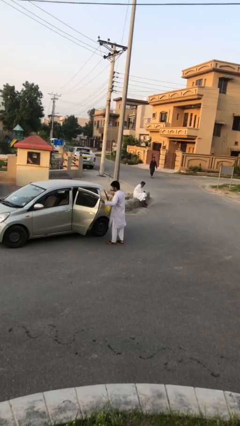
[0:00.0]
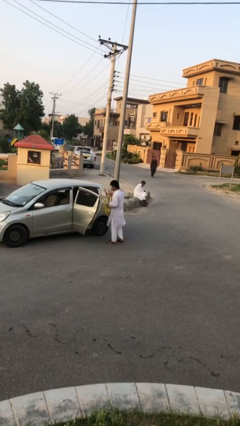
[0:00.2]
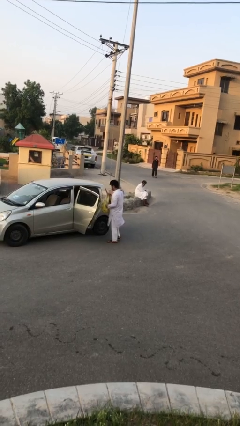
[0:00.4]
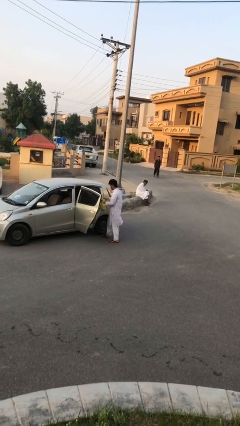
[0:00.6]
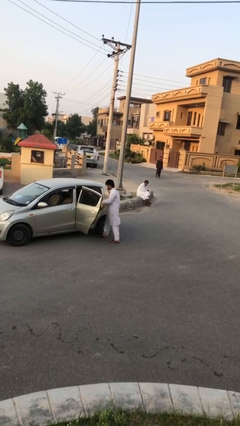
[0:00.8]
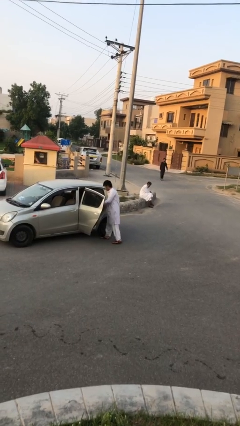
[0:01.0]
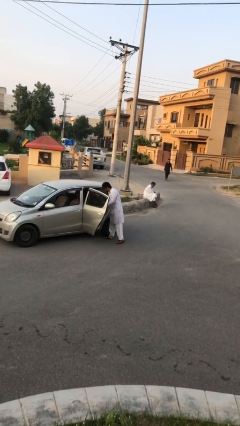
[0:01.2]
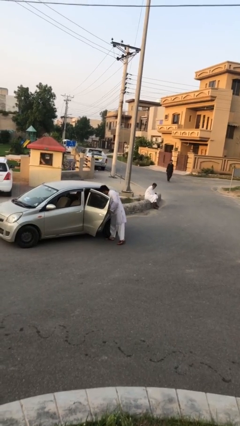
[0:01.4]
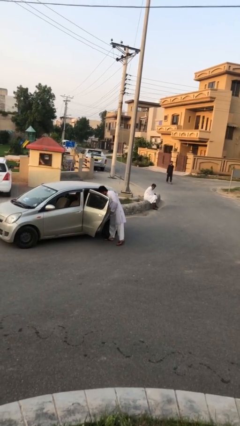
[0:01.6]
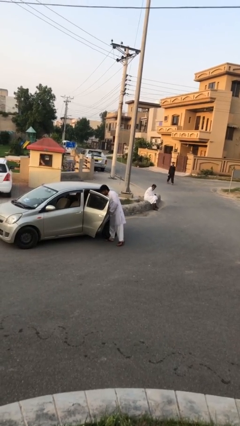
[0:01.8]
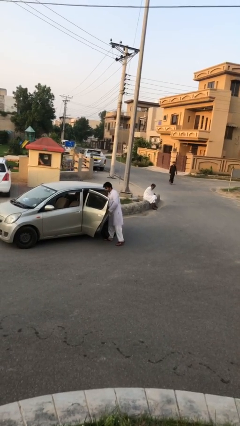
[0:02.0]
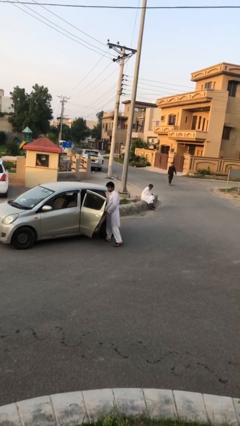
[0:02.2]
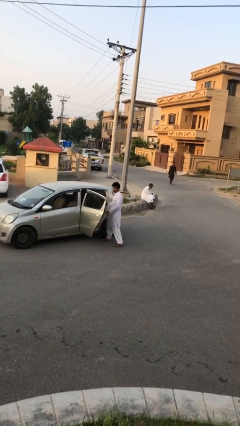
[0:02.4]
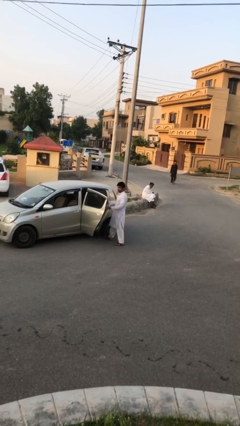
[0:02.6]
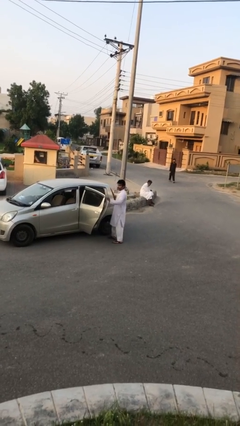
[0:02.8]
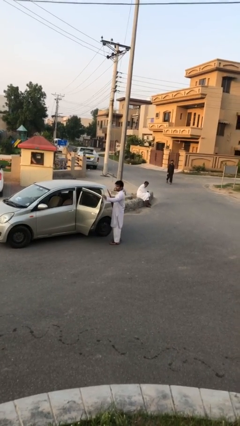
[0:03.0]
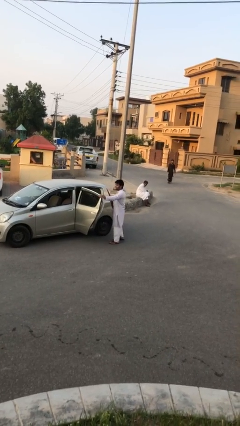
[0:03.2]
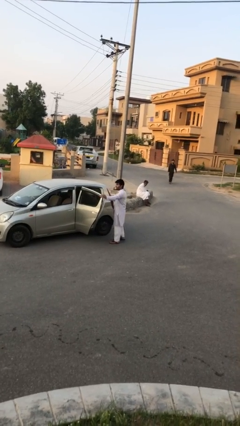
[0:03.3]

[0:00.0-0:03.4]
person loads car

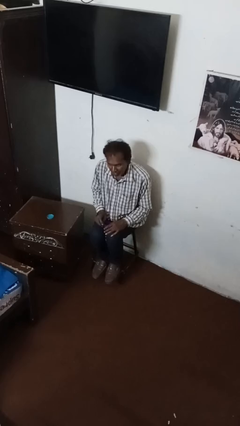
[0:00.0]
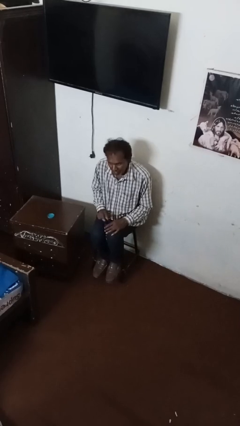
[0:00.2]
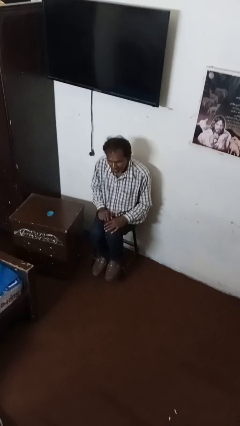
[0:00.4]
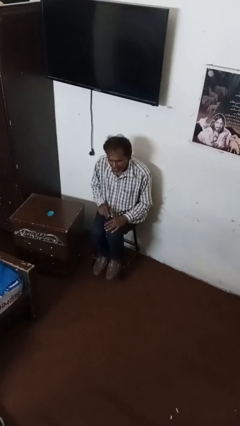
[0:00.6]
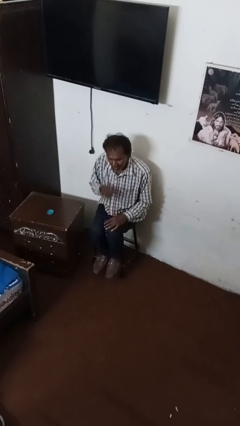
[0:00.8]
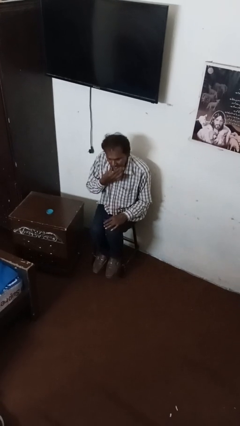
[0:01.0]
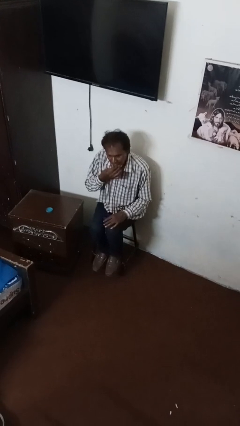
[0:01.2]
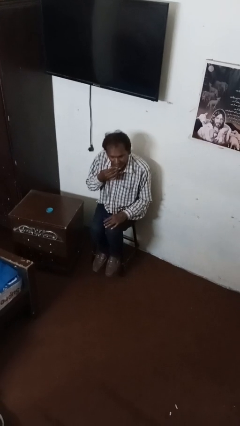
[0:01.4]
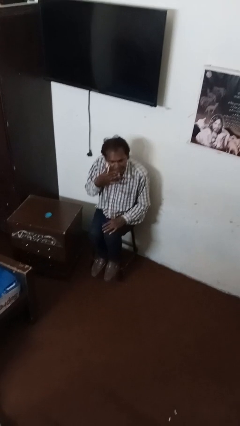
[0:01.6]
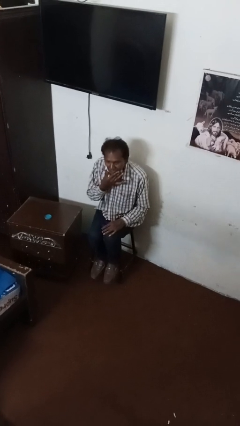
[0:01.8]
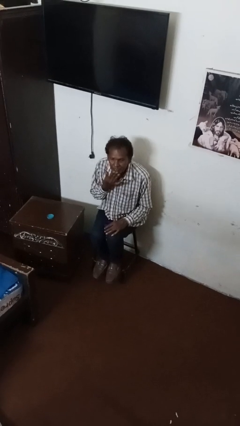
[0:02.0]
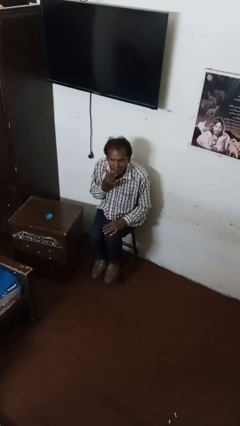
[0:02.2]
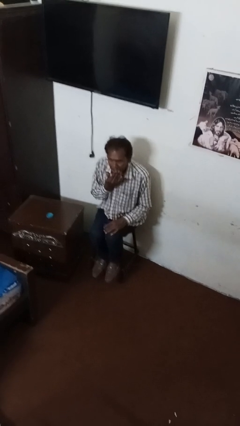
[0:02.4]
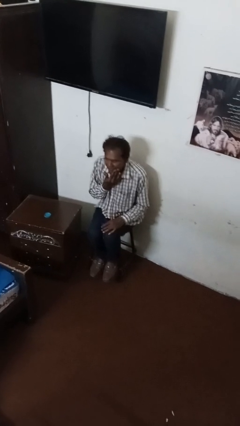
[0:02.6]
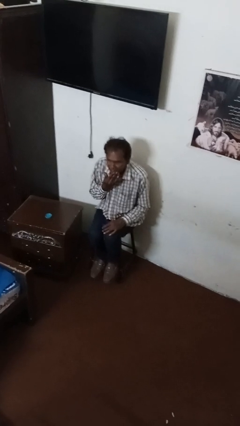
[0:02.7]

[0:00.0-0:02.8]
person strokes chin

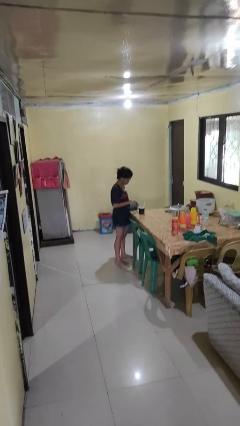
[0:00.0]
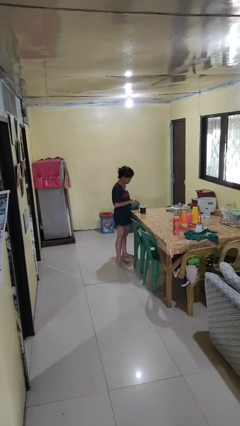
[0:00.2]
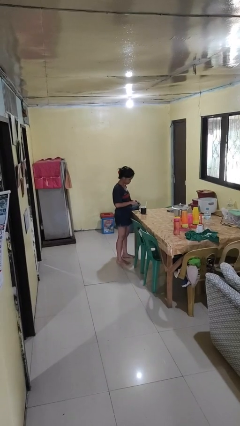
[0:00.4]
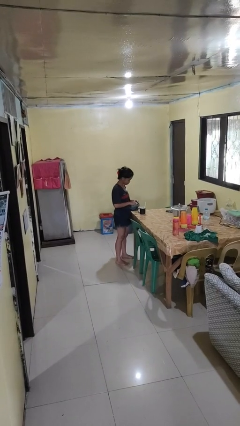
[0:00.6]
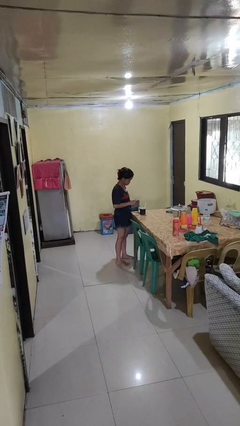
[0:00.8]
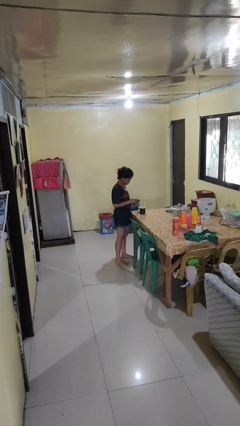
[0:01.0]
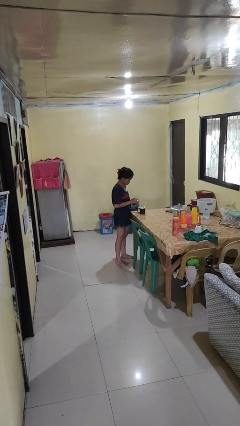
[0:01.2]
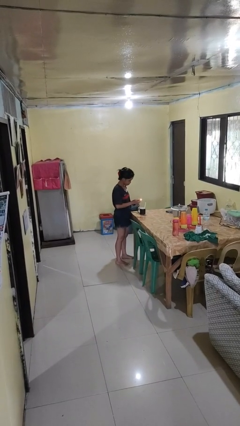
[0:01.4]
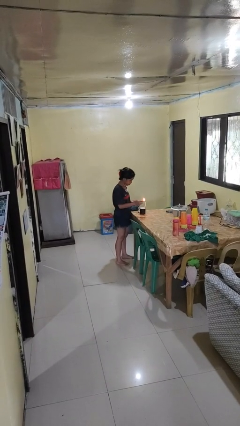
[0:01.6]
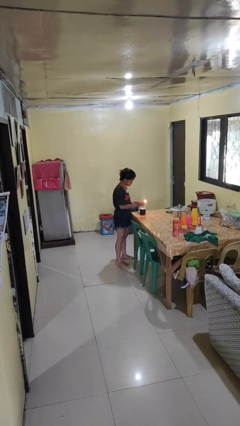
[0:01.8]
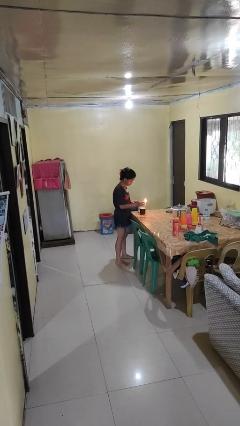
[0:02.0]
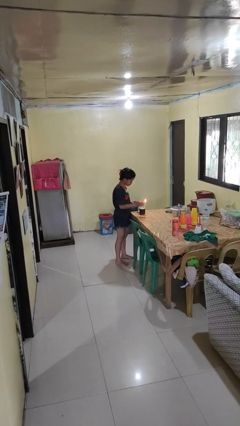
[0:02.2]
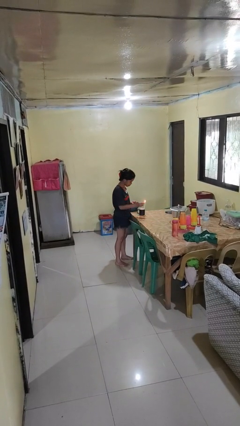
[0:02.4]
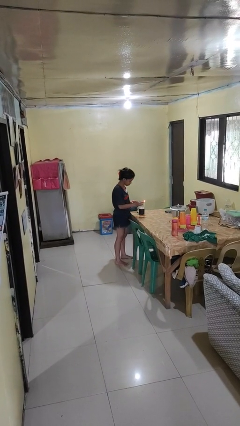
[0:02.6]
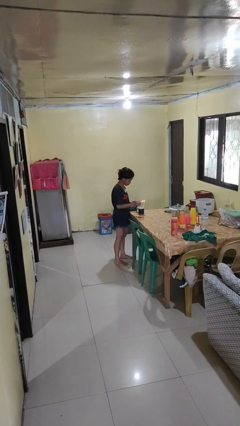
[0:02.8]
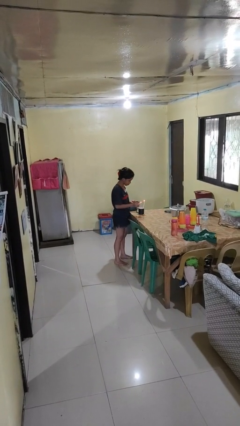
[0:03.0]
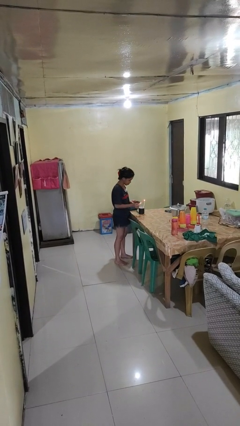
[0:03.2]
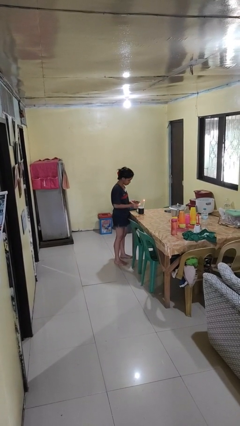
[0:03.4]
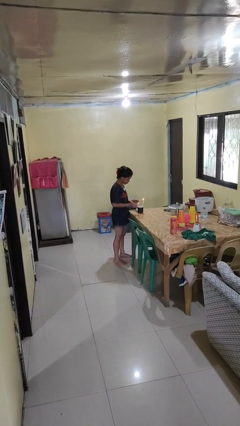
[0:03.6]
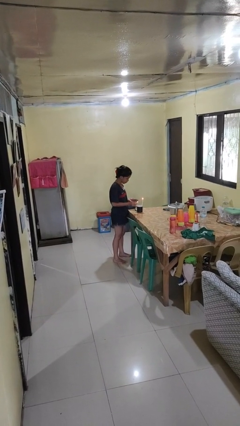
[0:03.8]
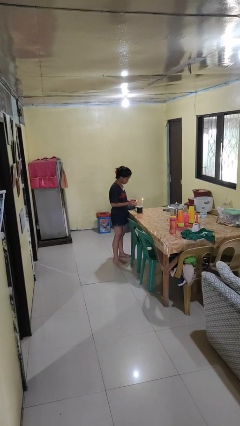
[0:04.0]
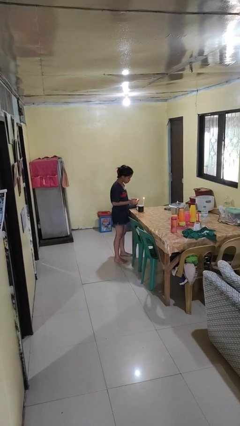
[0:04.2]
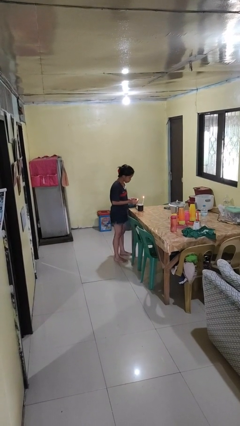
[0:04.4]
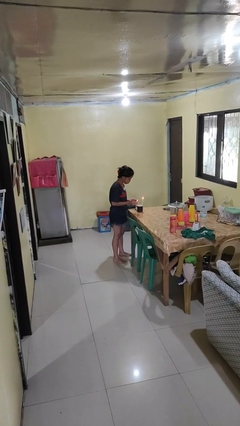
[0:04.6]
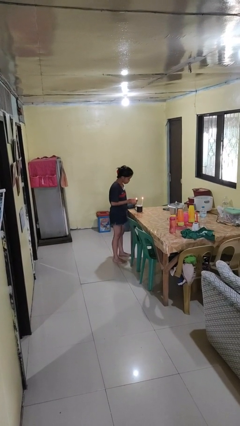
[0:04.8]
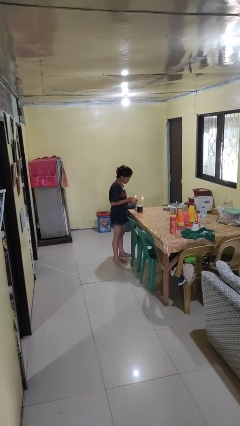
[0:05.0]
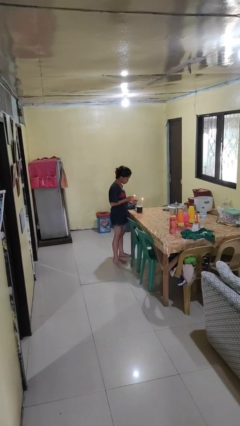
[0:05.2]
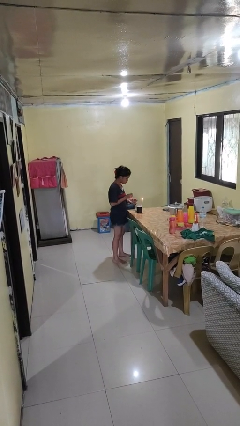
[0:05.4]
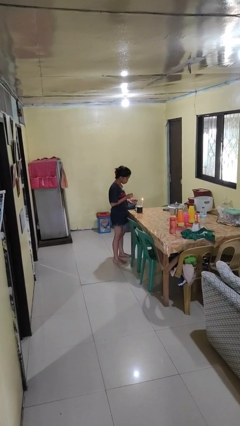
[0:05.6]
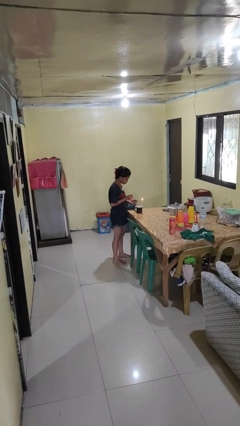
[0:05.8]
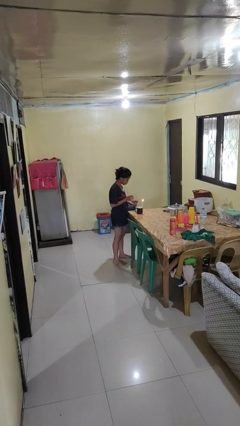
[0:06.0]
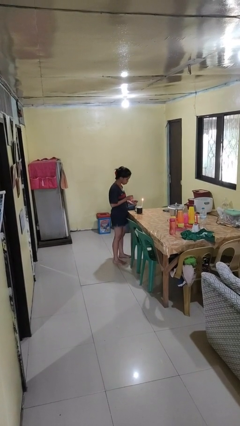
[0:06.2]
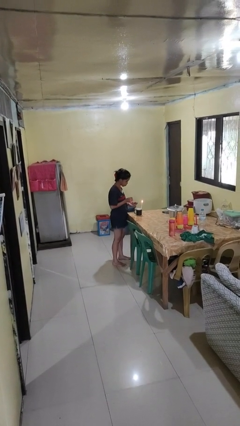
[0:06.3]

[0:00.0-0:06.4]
person lights candle

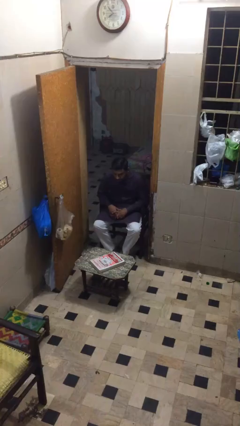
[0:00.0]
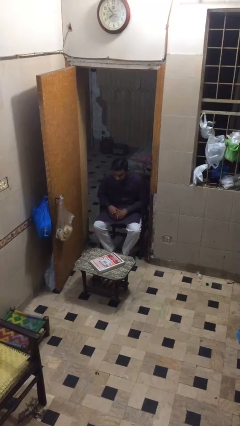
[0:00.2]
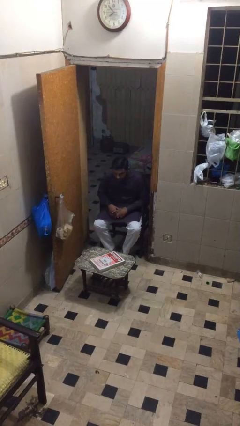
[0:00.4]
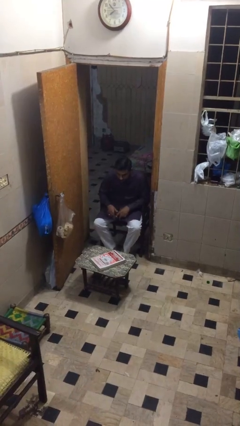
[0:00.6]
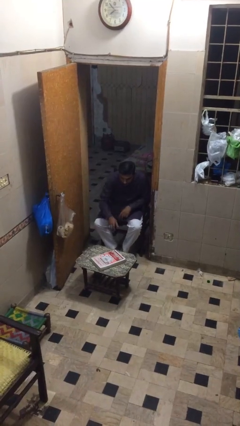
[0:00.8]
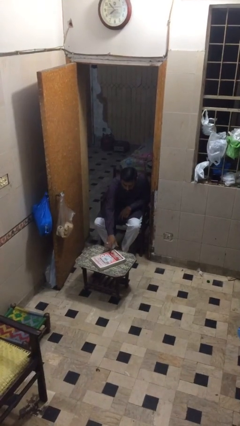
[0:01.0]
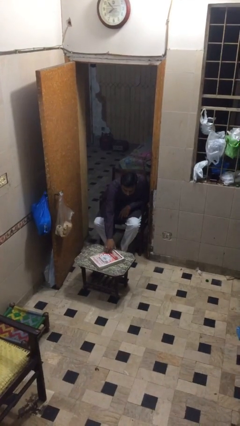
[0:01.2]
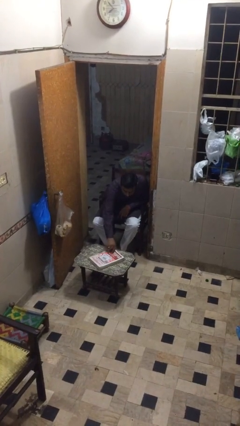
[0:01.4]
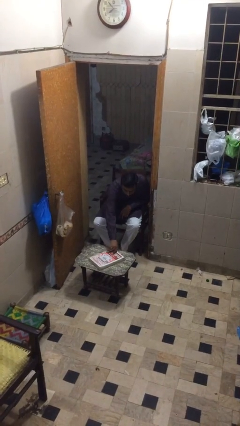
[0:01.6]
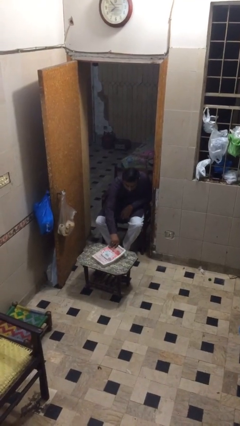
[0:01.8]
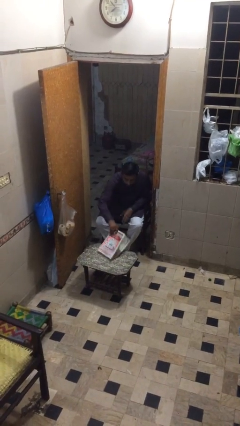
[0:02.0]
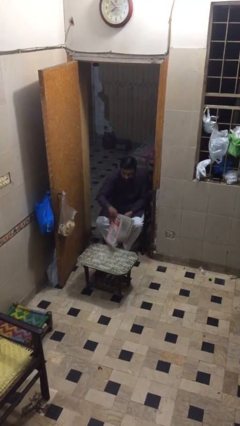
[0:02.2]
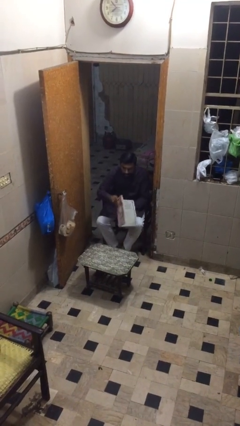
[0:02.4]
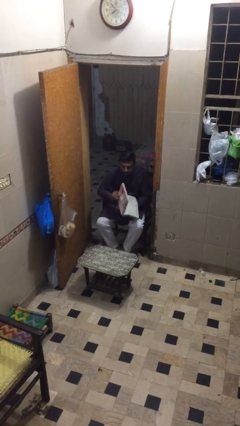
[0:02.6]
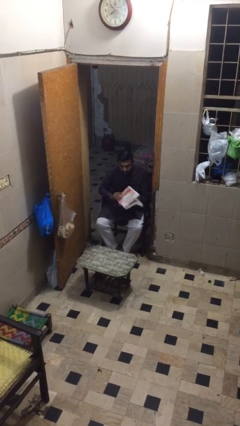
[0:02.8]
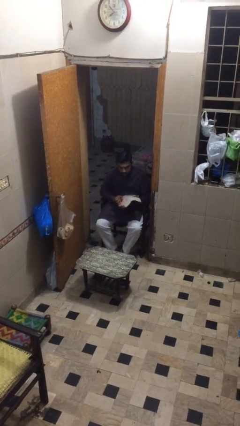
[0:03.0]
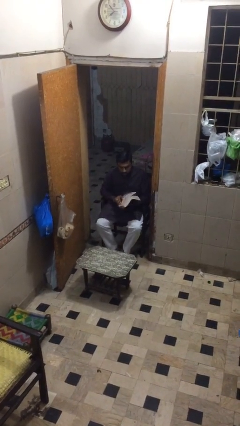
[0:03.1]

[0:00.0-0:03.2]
person picks up object from table

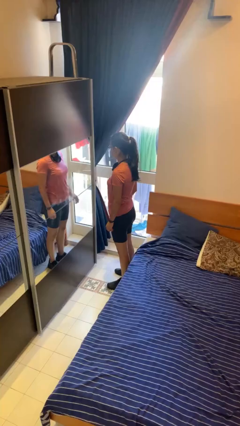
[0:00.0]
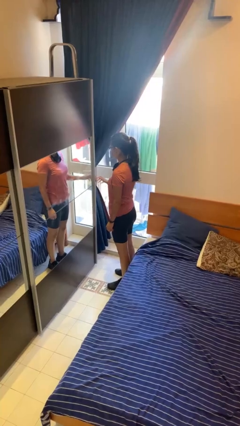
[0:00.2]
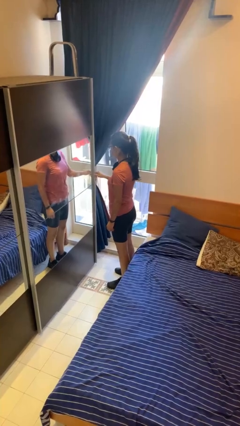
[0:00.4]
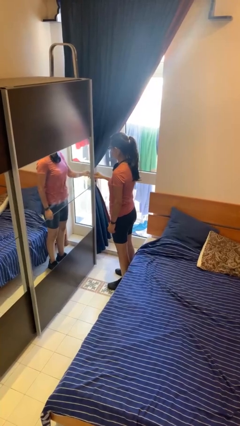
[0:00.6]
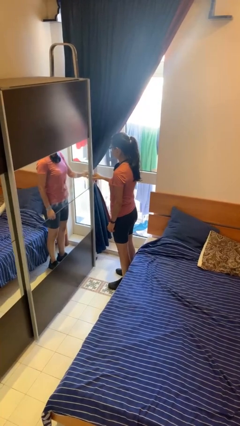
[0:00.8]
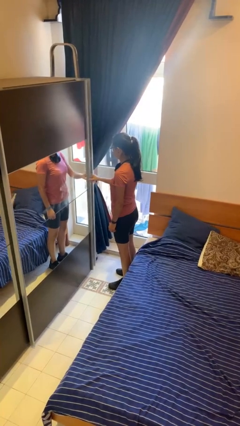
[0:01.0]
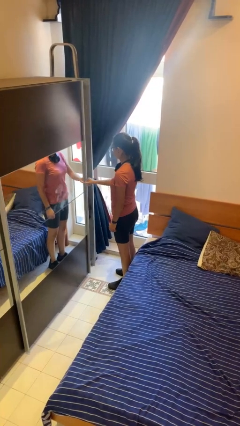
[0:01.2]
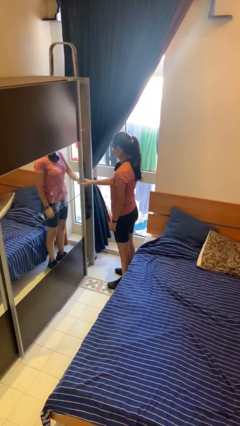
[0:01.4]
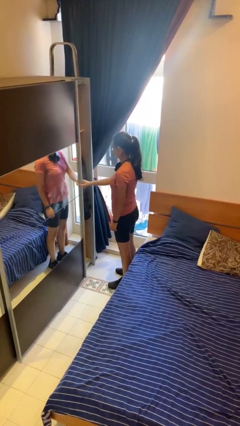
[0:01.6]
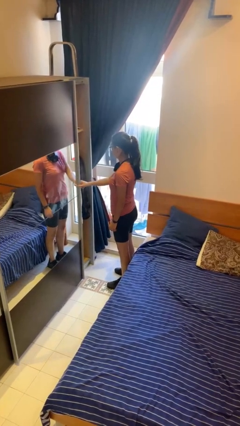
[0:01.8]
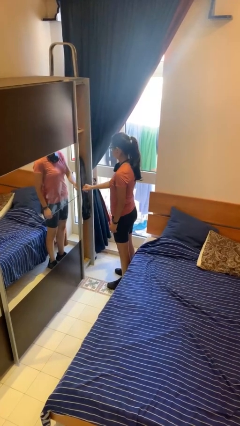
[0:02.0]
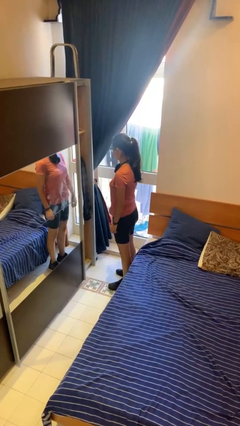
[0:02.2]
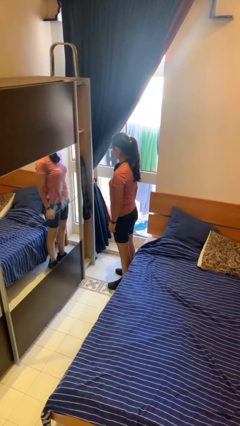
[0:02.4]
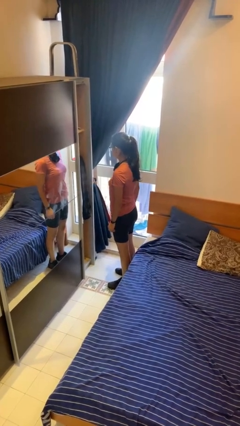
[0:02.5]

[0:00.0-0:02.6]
person opens closet door
